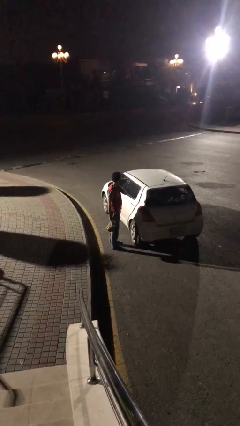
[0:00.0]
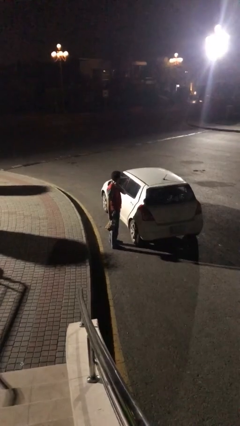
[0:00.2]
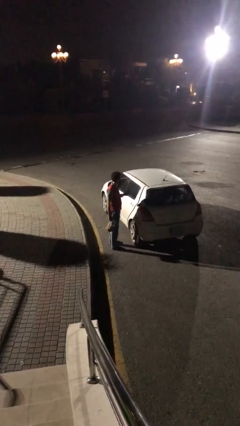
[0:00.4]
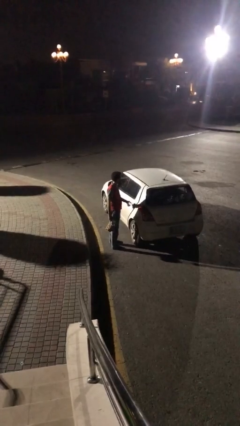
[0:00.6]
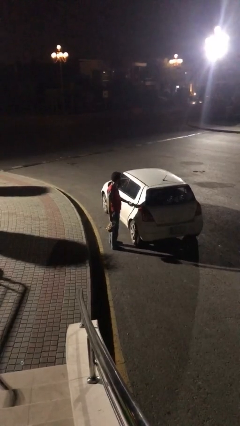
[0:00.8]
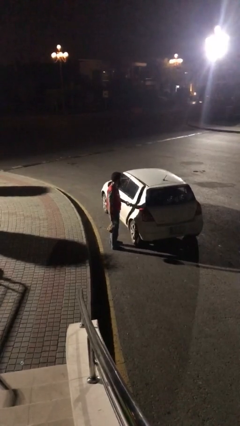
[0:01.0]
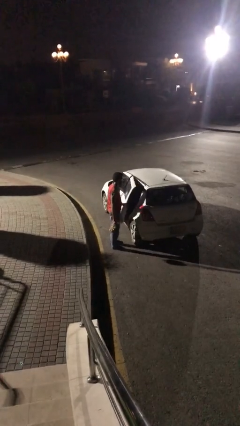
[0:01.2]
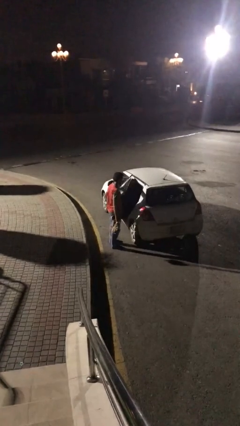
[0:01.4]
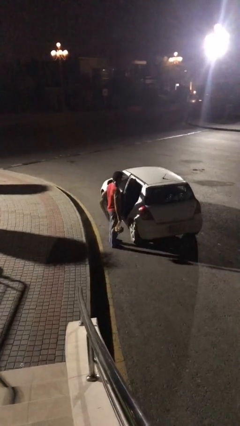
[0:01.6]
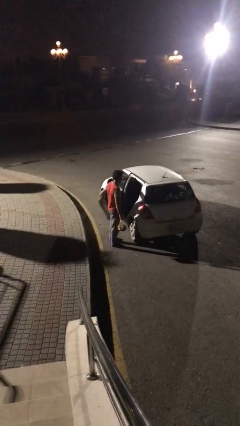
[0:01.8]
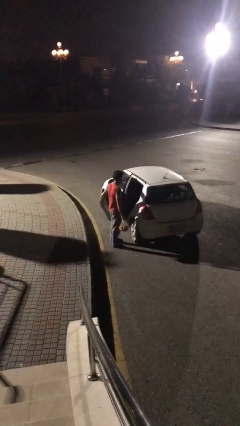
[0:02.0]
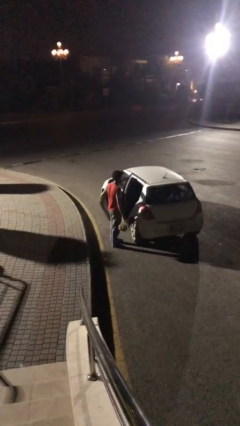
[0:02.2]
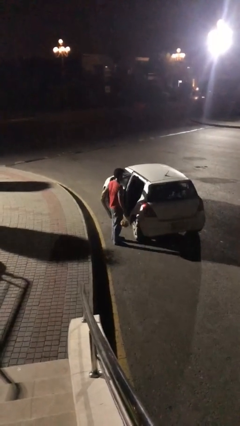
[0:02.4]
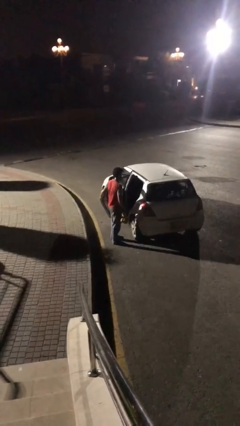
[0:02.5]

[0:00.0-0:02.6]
person opens car door

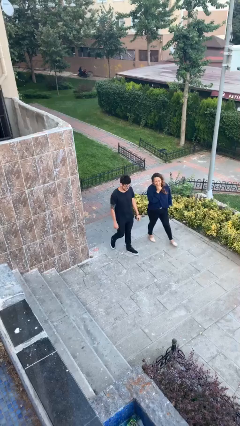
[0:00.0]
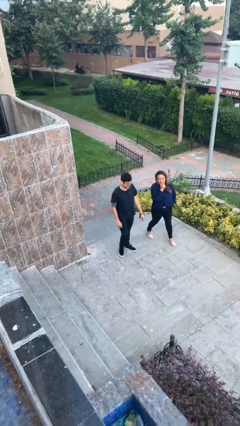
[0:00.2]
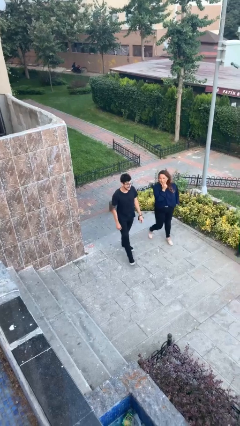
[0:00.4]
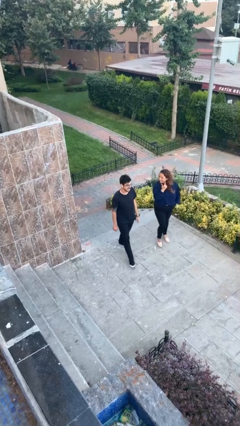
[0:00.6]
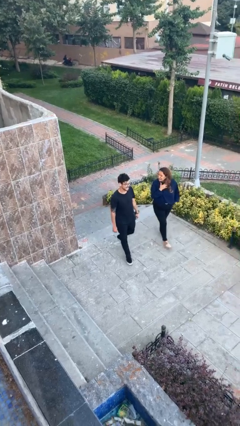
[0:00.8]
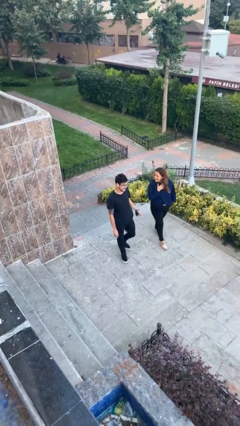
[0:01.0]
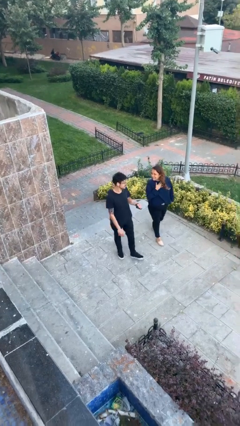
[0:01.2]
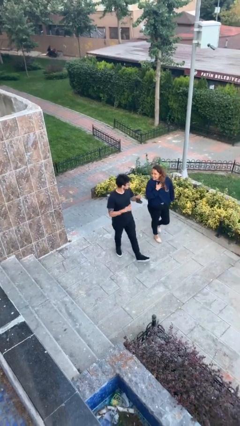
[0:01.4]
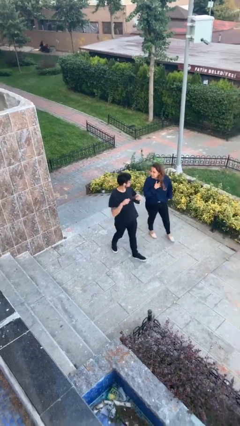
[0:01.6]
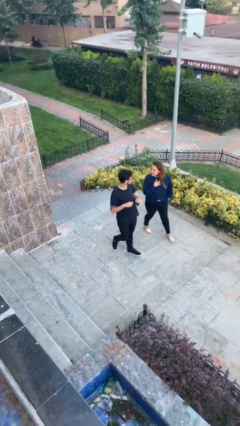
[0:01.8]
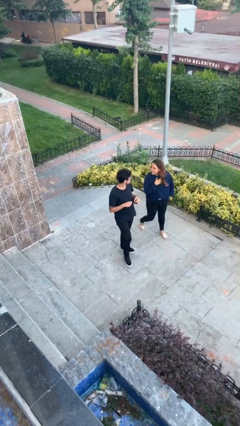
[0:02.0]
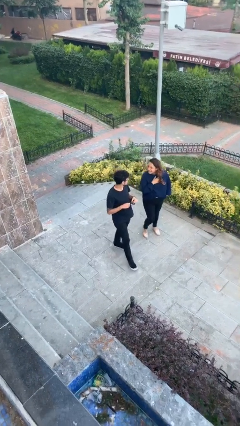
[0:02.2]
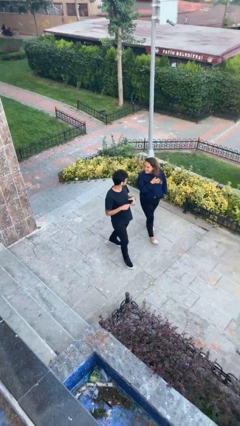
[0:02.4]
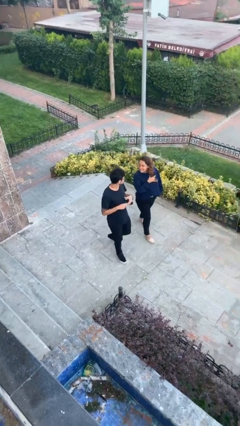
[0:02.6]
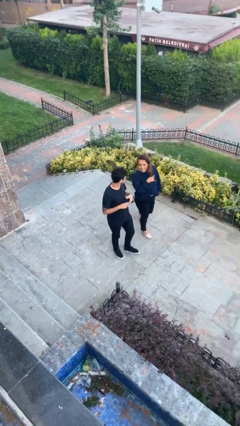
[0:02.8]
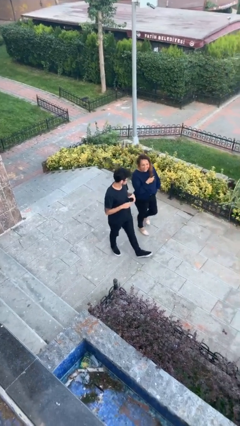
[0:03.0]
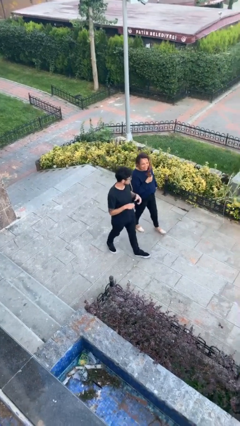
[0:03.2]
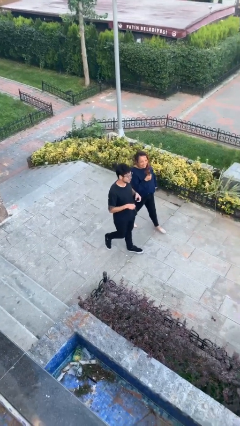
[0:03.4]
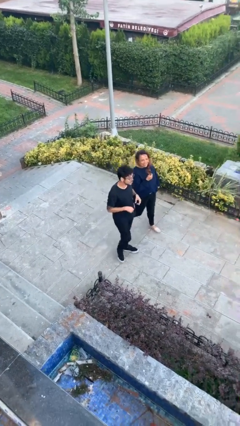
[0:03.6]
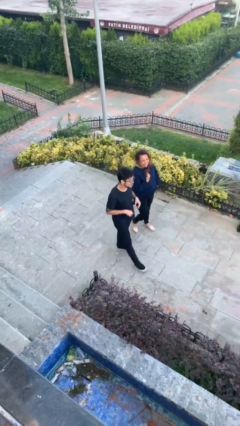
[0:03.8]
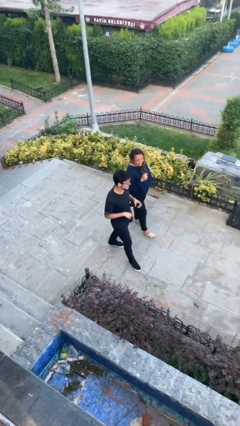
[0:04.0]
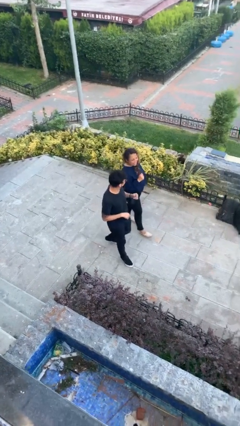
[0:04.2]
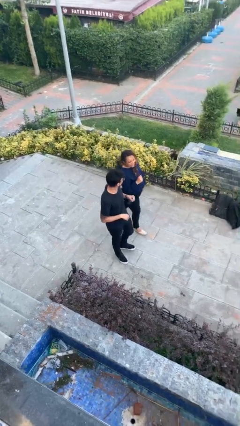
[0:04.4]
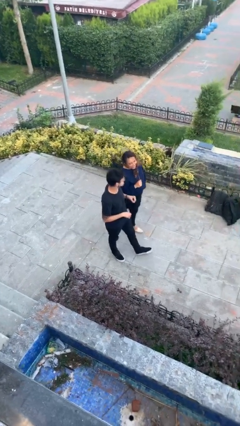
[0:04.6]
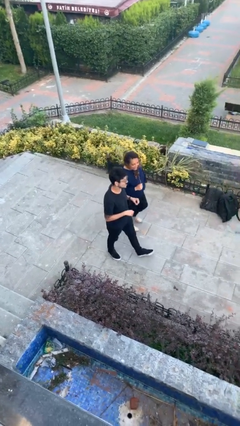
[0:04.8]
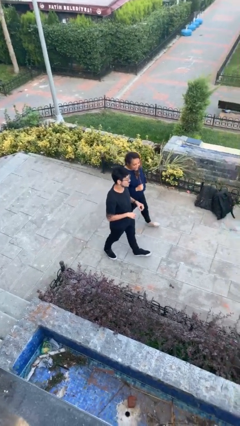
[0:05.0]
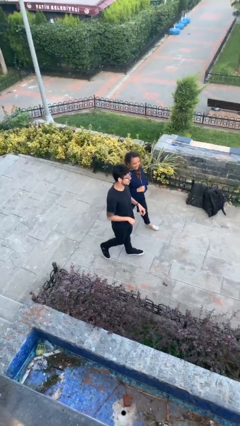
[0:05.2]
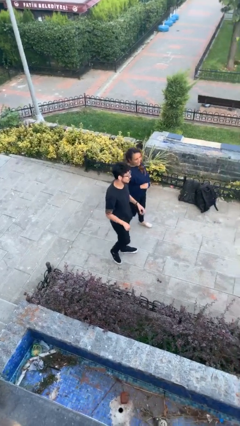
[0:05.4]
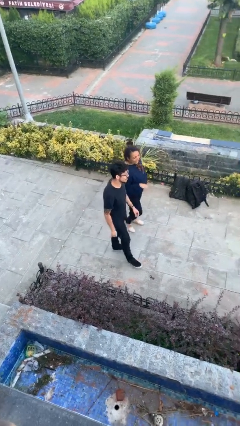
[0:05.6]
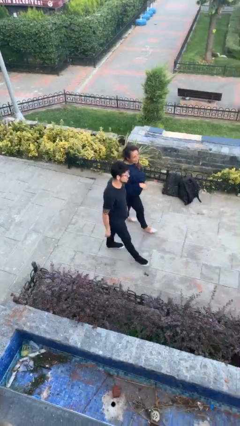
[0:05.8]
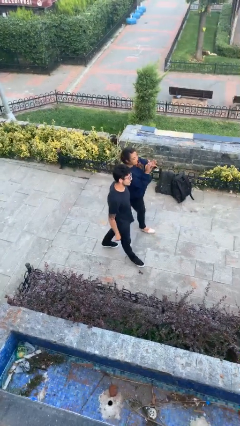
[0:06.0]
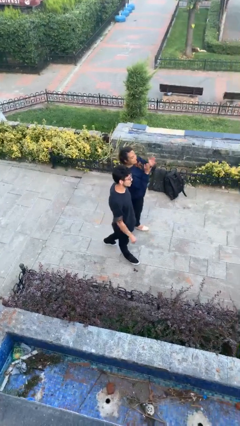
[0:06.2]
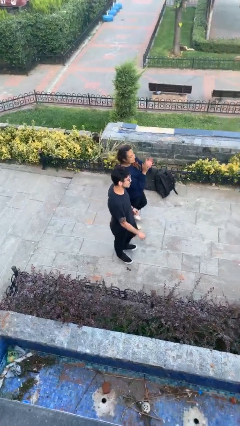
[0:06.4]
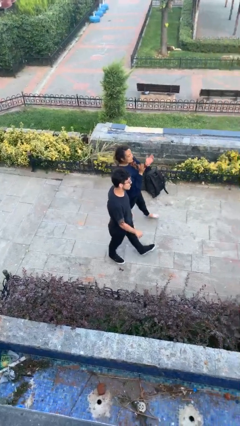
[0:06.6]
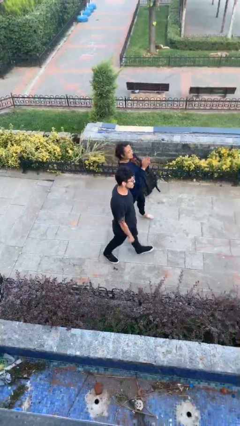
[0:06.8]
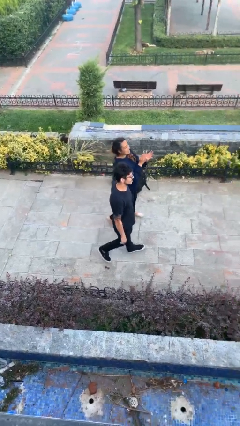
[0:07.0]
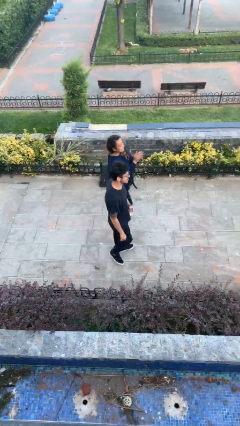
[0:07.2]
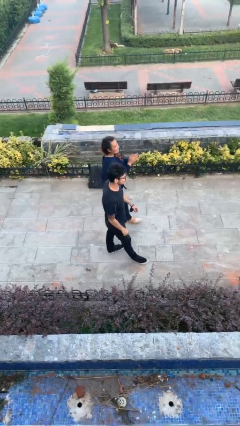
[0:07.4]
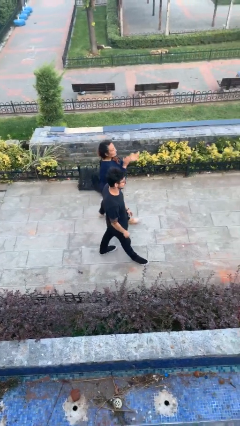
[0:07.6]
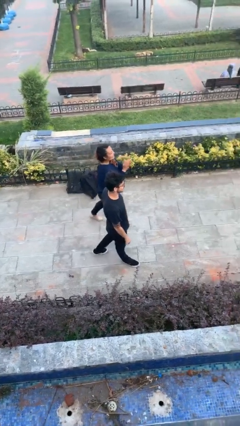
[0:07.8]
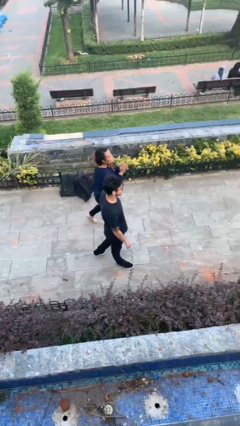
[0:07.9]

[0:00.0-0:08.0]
person talks to person

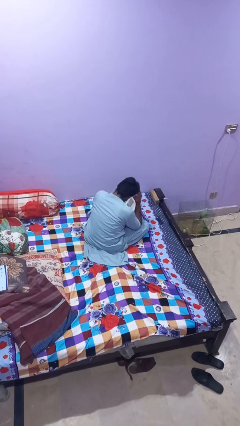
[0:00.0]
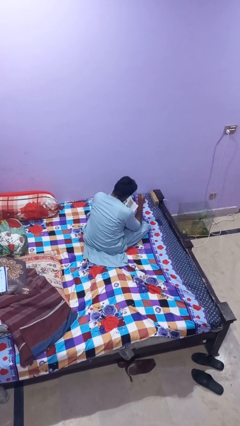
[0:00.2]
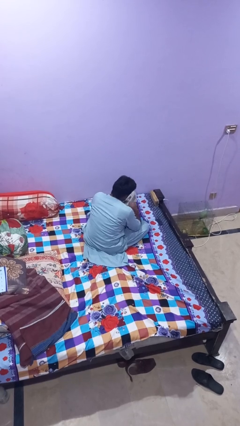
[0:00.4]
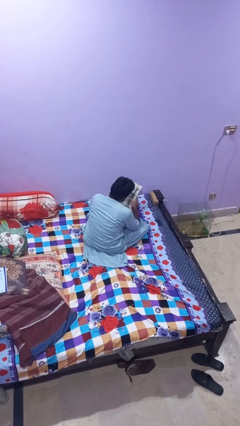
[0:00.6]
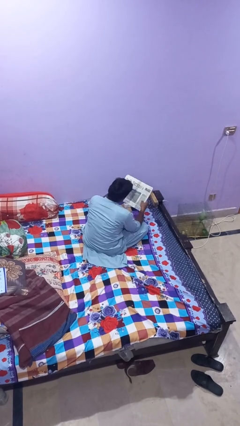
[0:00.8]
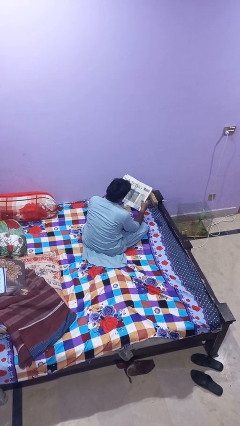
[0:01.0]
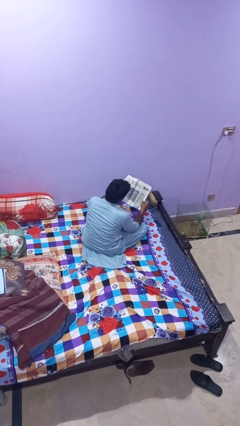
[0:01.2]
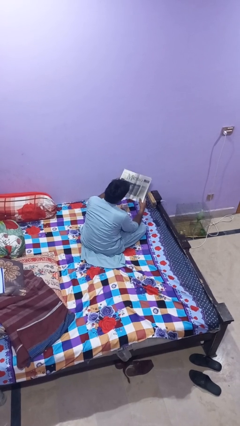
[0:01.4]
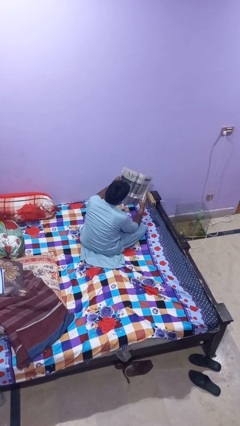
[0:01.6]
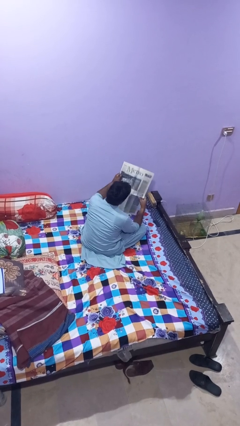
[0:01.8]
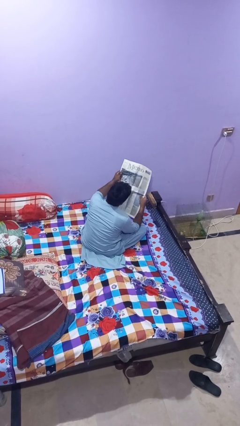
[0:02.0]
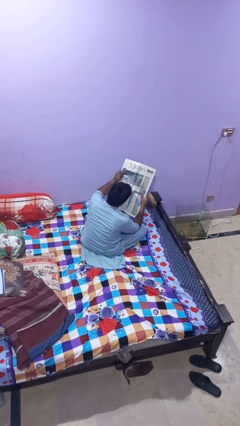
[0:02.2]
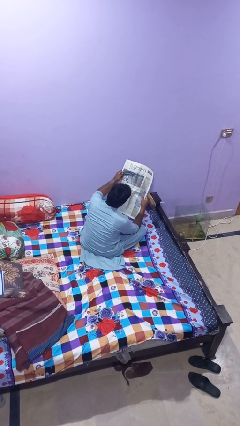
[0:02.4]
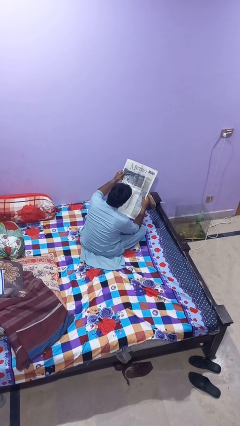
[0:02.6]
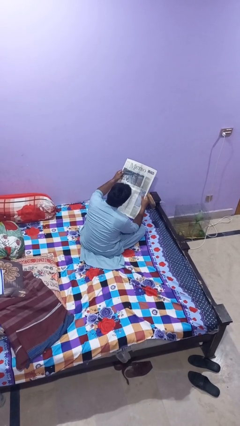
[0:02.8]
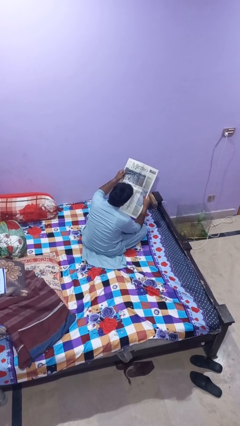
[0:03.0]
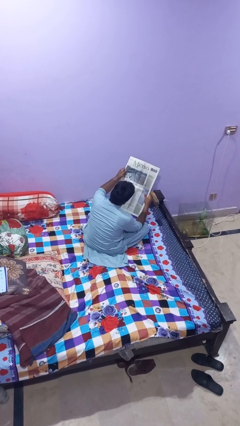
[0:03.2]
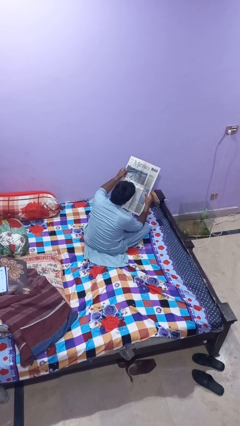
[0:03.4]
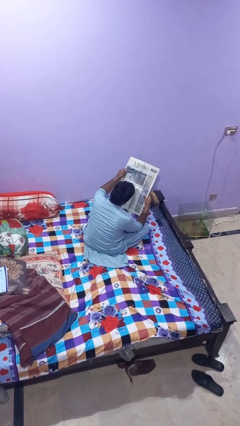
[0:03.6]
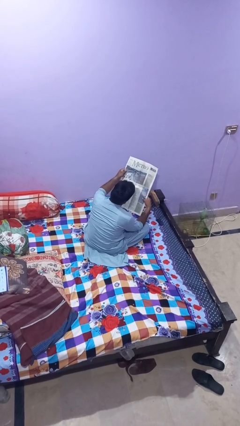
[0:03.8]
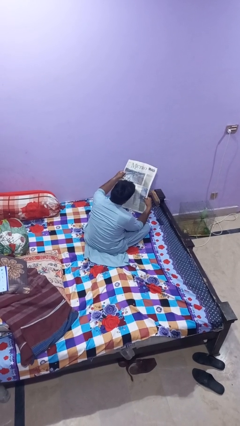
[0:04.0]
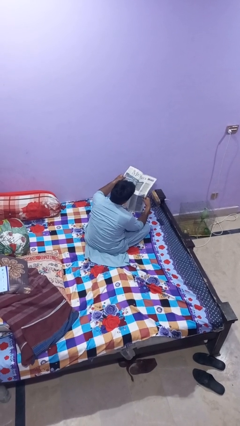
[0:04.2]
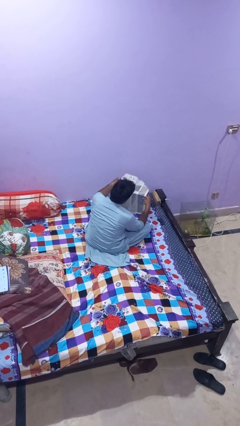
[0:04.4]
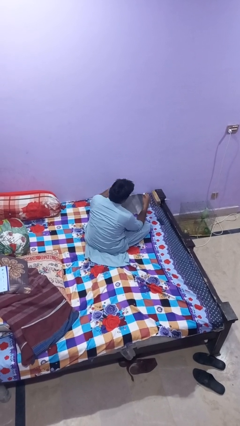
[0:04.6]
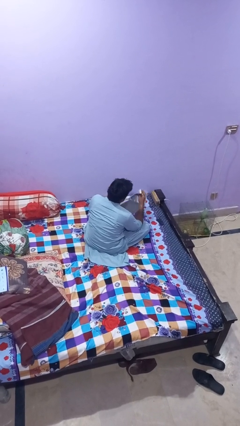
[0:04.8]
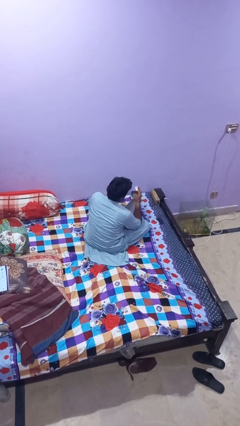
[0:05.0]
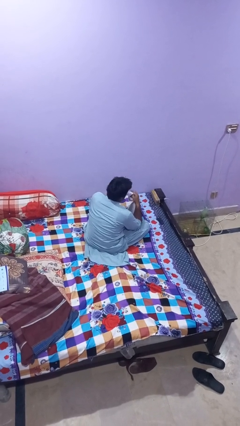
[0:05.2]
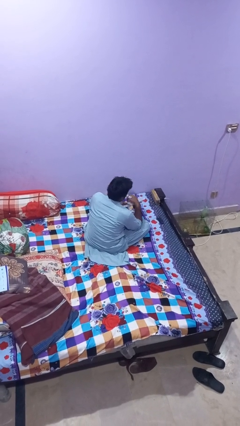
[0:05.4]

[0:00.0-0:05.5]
person reads newspaper

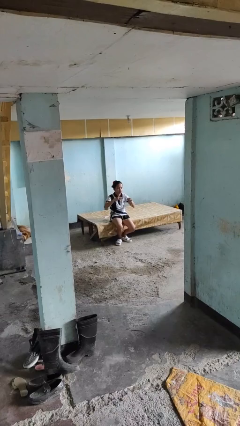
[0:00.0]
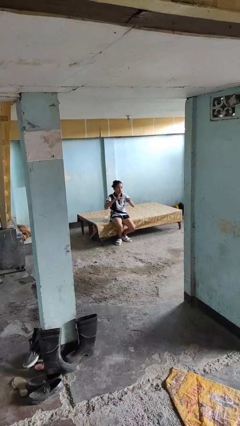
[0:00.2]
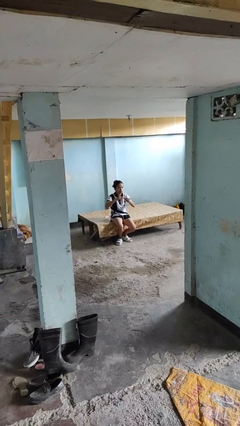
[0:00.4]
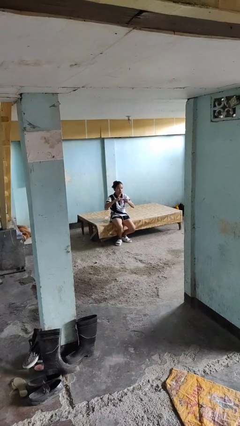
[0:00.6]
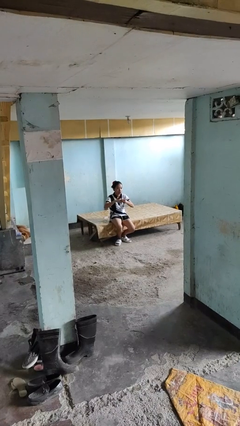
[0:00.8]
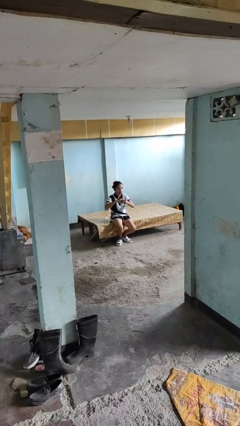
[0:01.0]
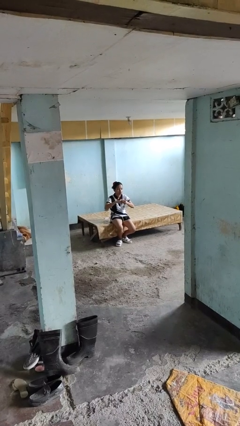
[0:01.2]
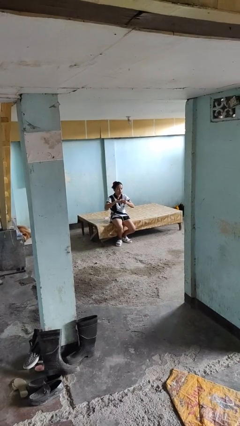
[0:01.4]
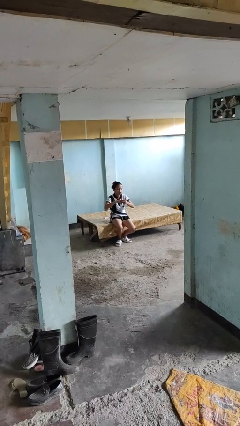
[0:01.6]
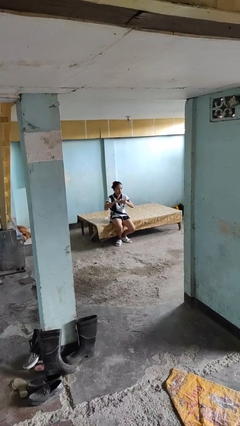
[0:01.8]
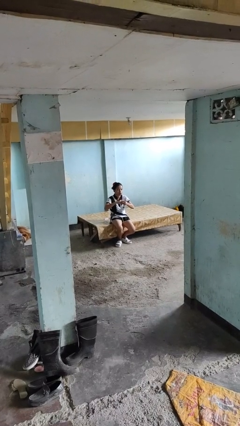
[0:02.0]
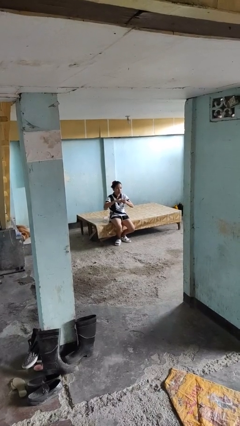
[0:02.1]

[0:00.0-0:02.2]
person puts on ring
